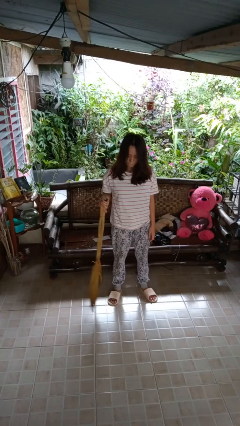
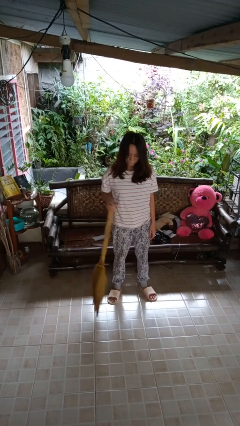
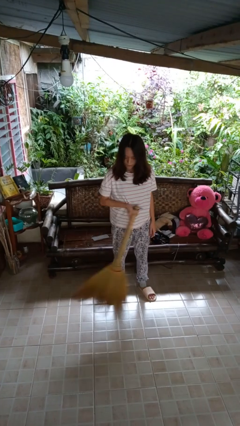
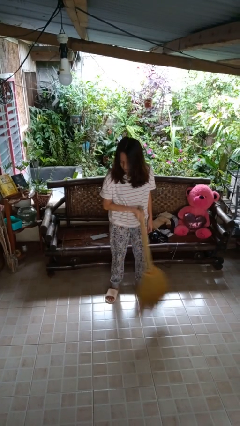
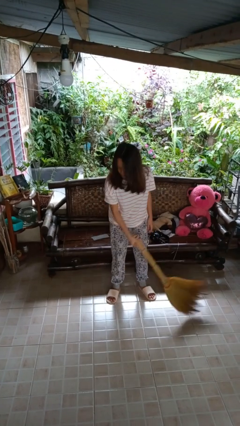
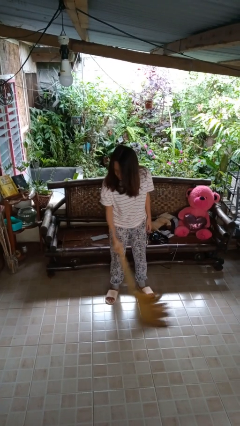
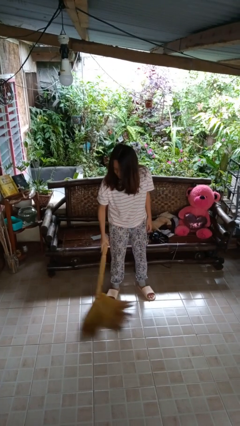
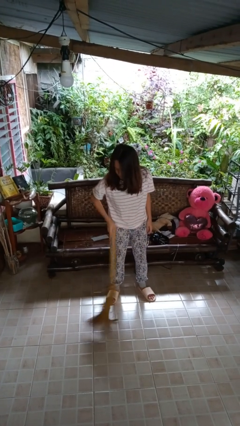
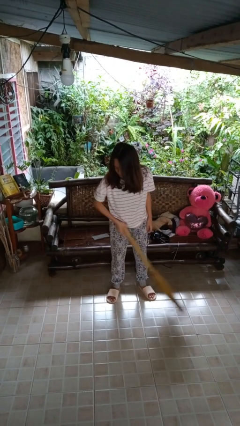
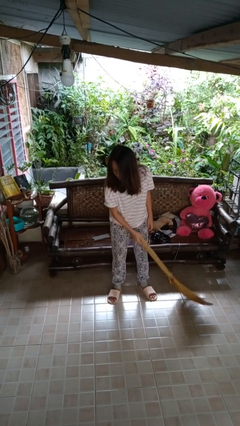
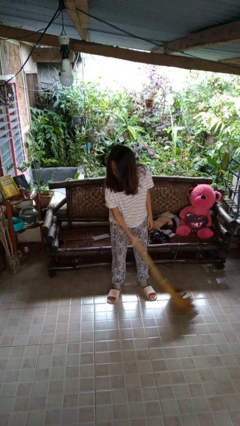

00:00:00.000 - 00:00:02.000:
person sweeps floor

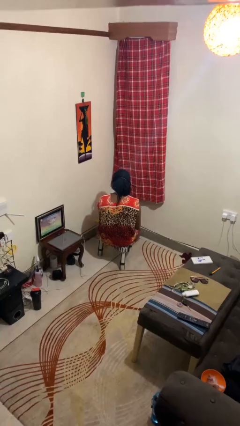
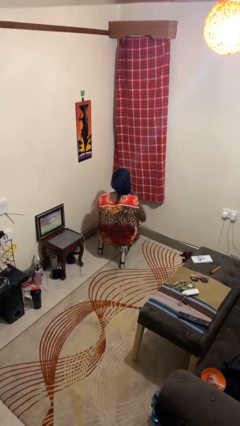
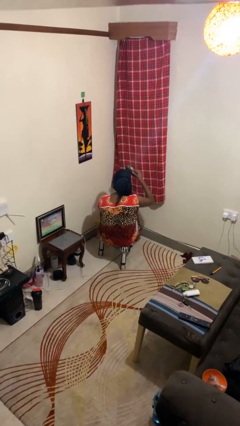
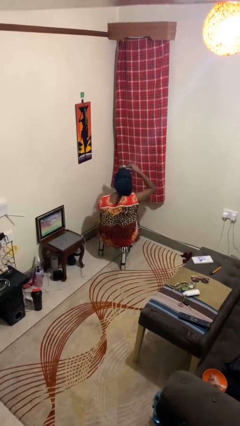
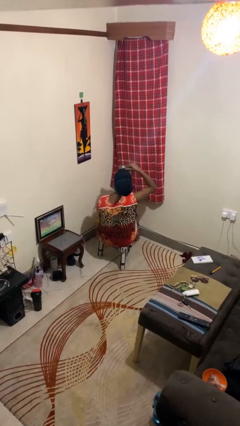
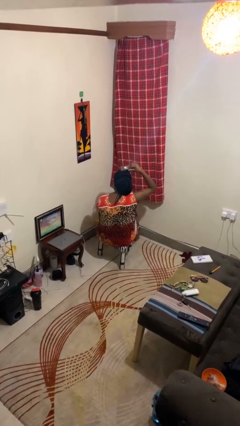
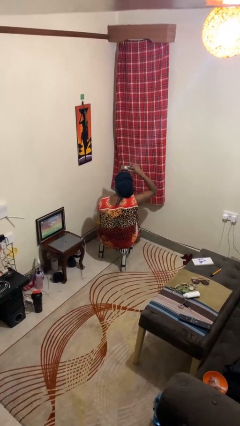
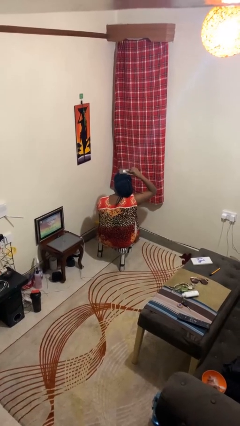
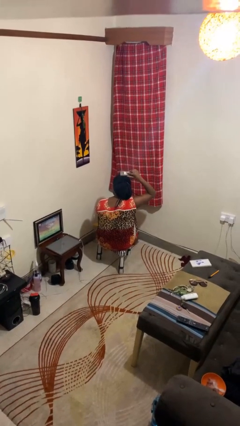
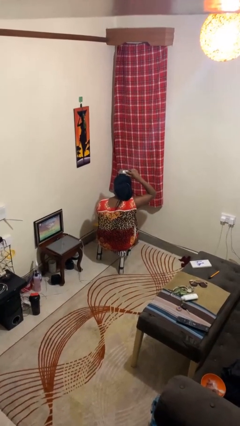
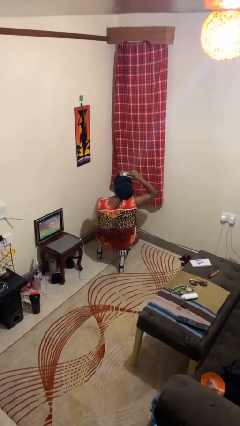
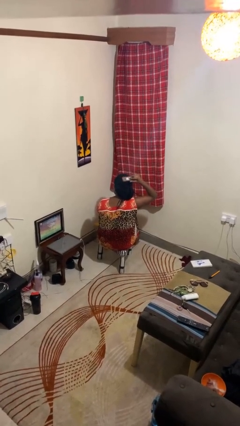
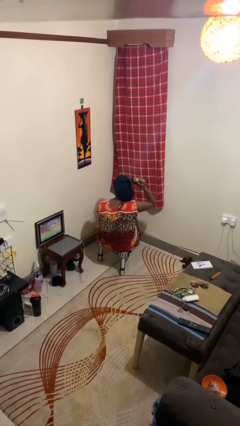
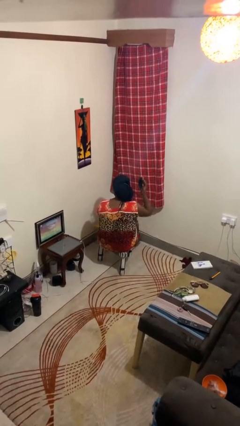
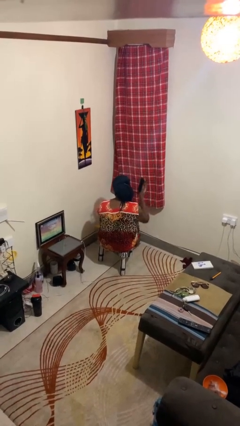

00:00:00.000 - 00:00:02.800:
person brushes hair

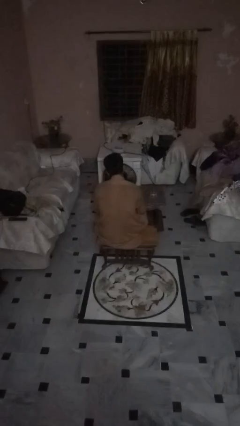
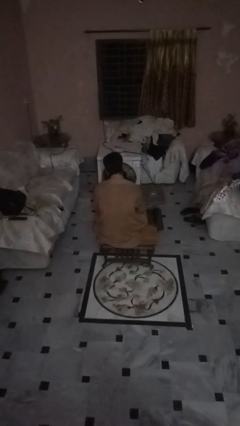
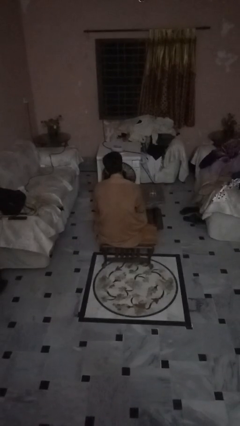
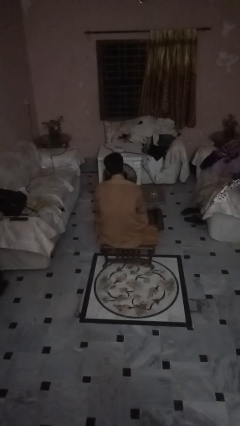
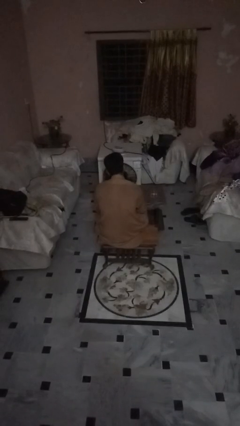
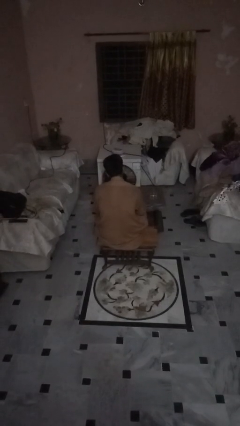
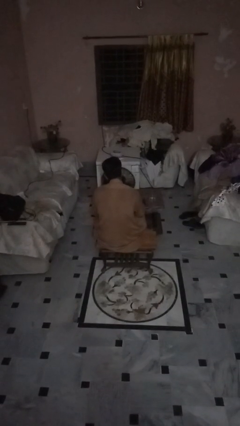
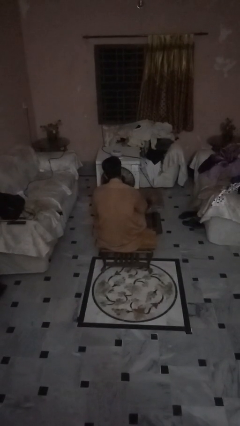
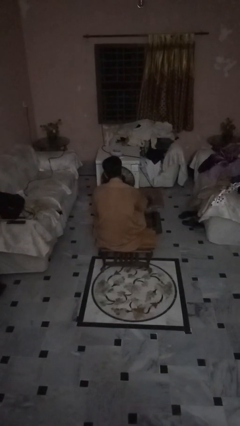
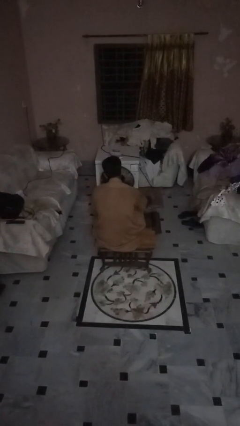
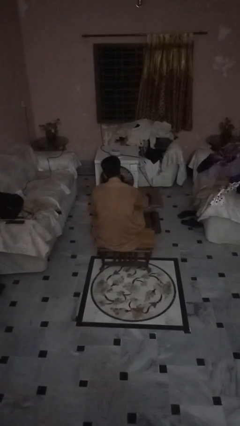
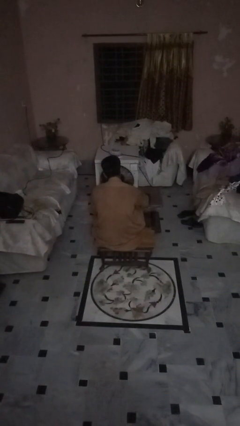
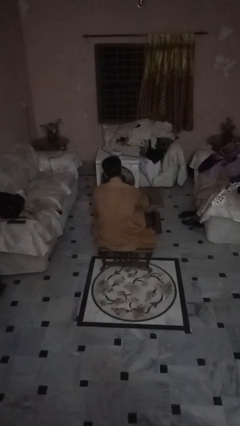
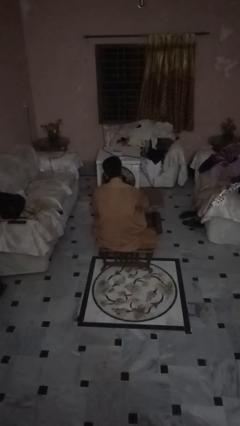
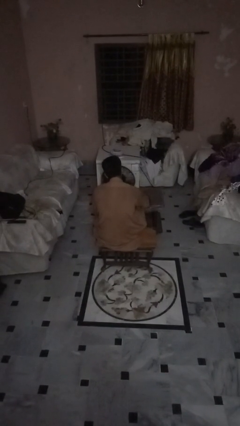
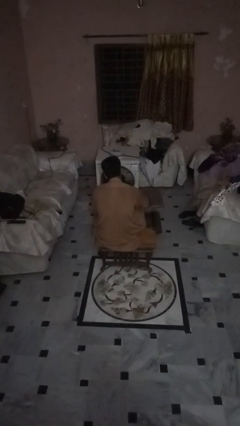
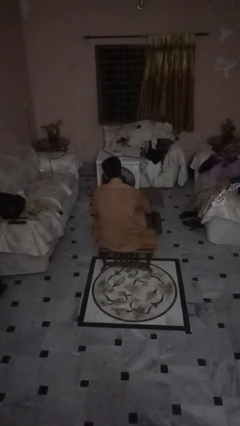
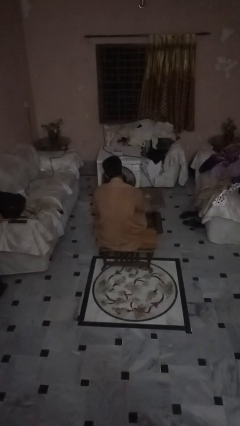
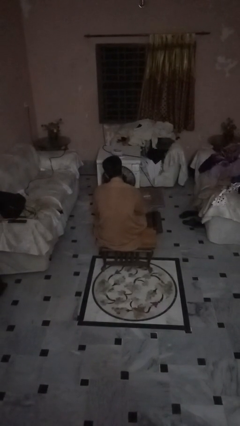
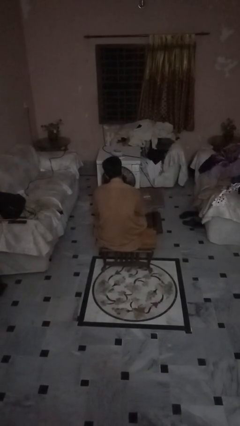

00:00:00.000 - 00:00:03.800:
person spills on table

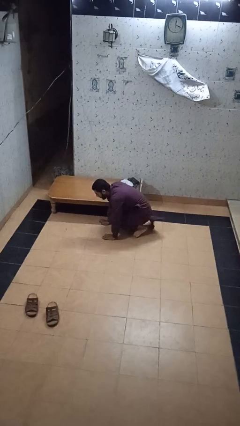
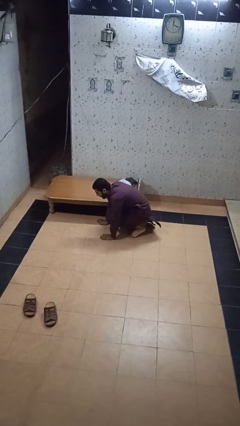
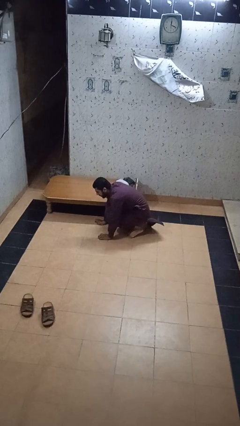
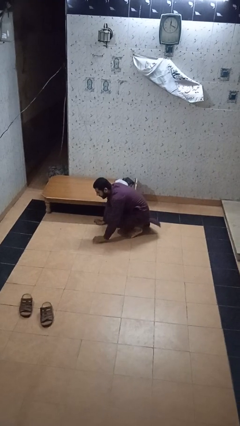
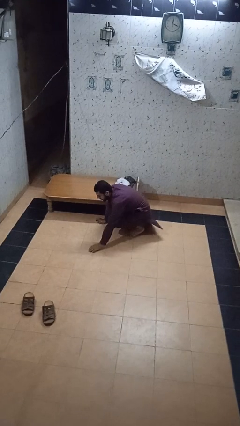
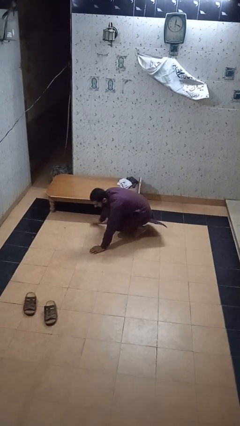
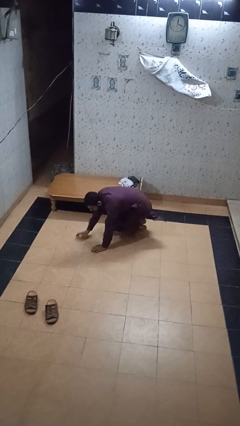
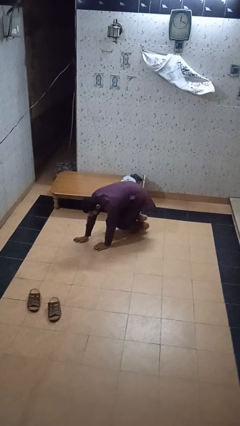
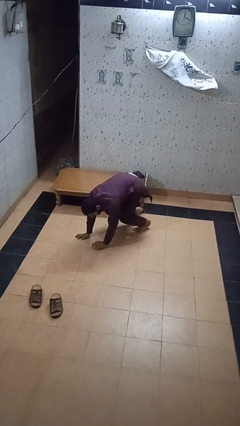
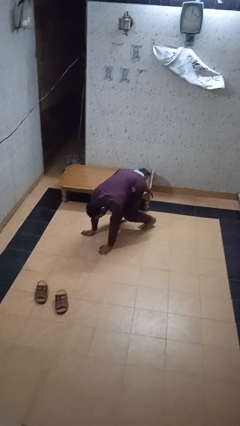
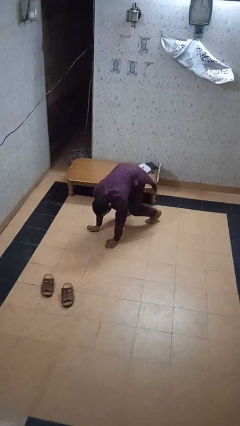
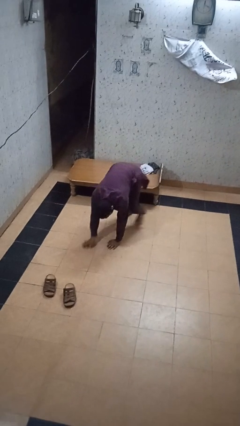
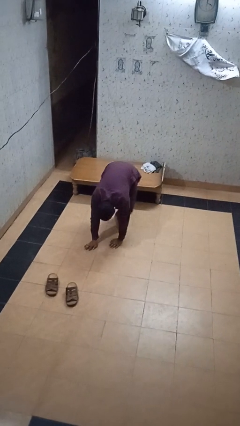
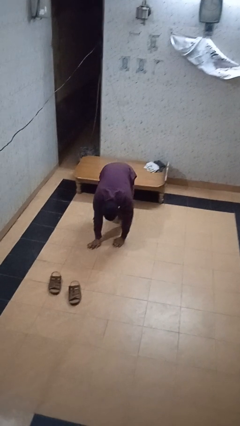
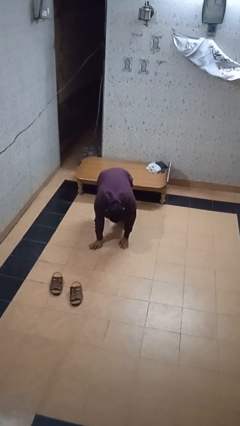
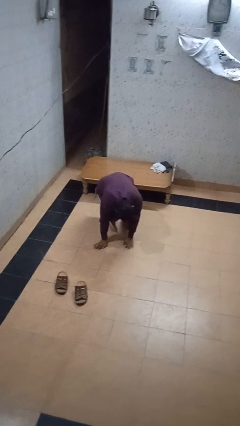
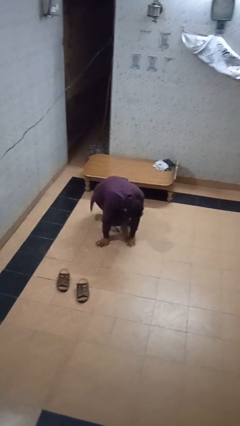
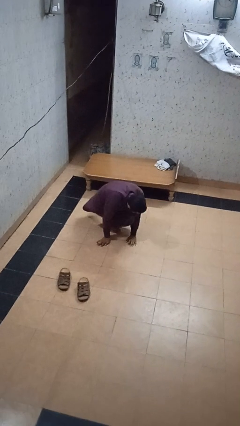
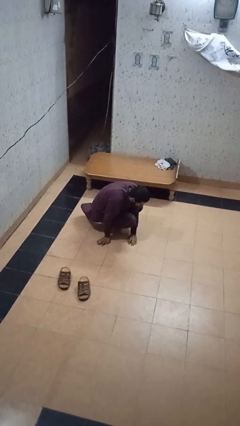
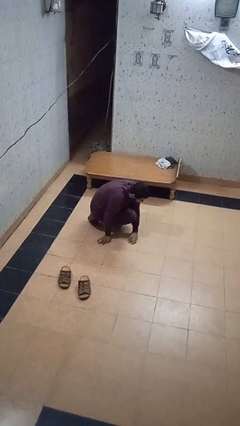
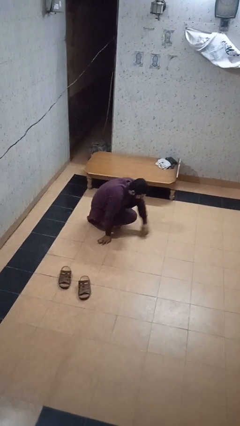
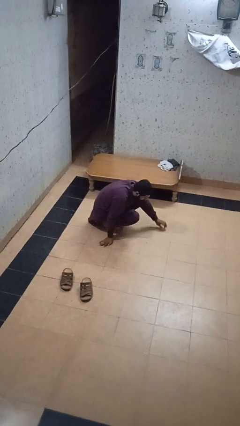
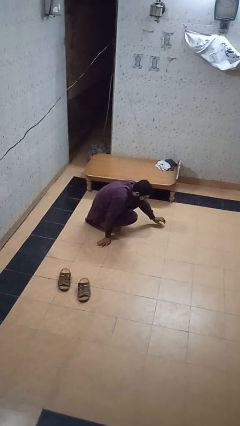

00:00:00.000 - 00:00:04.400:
person crawls

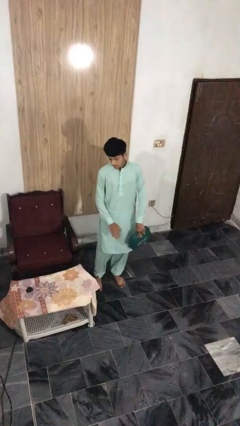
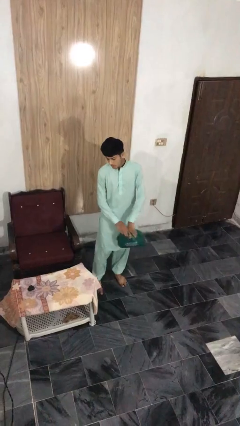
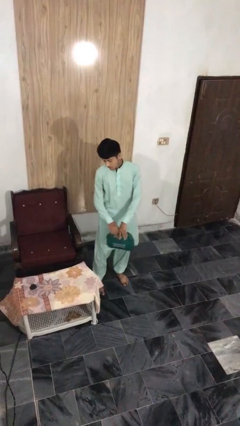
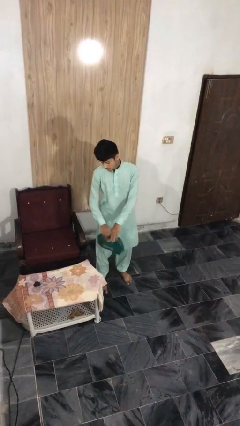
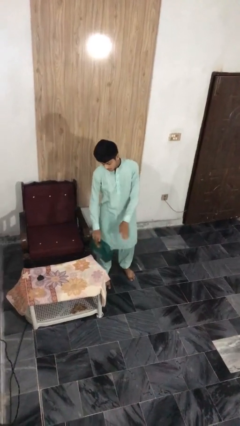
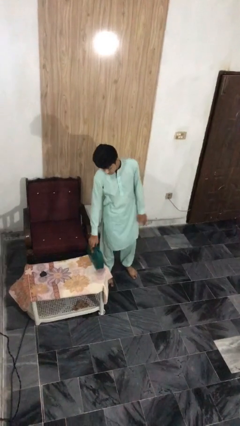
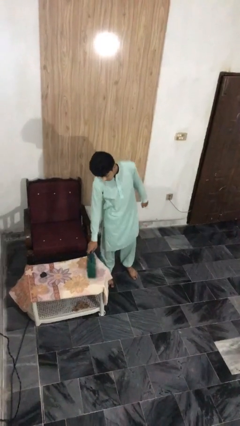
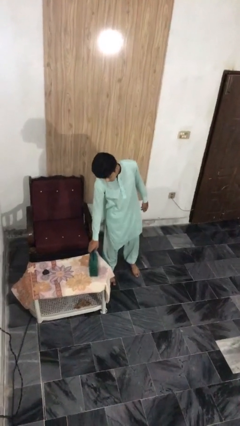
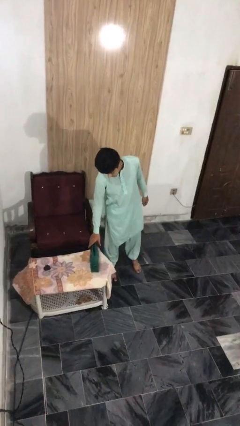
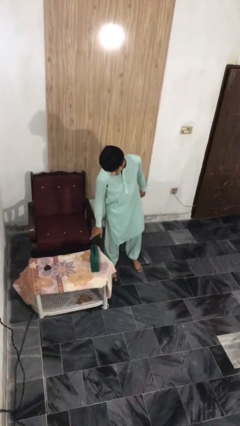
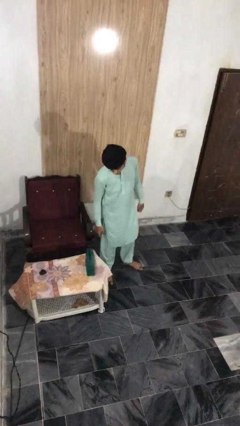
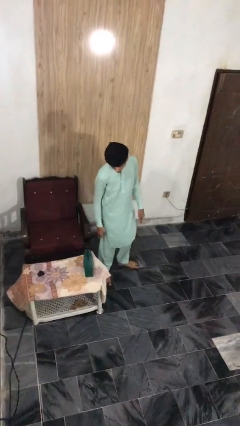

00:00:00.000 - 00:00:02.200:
person puts down object on table

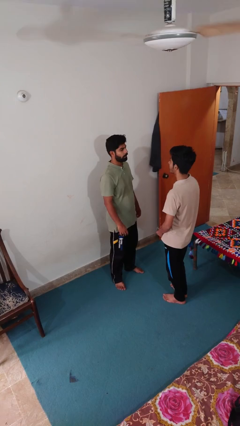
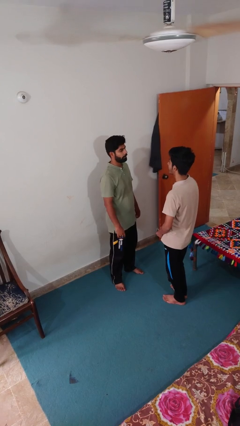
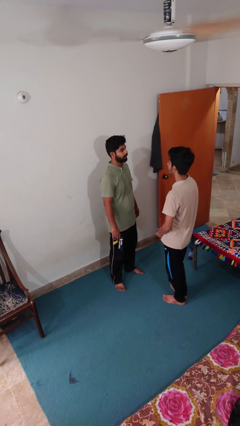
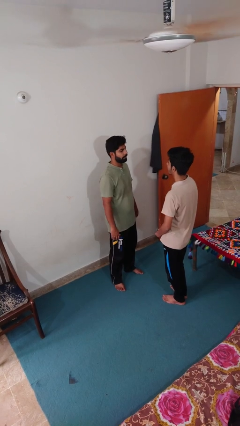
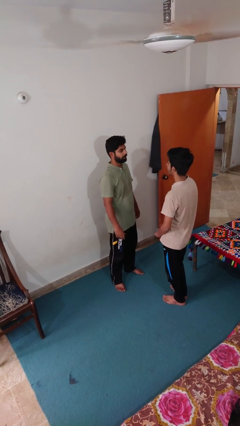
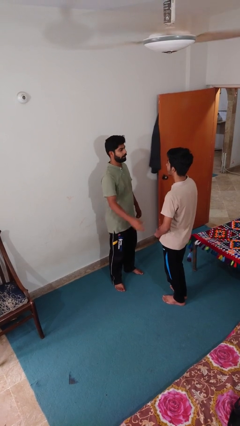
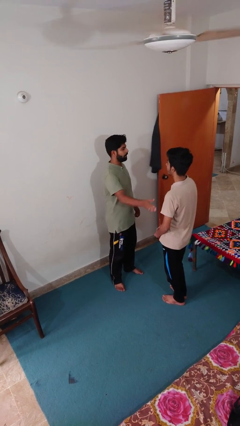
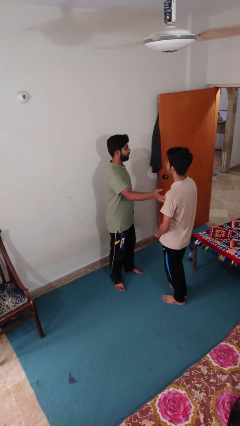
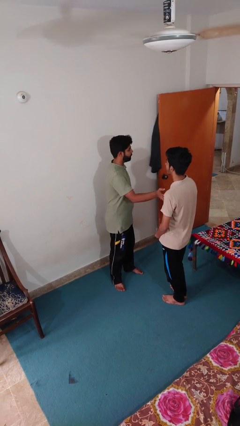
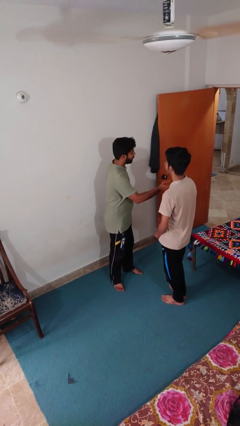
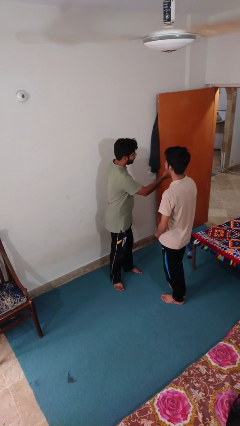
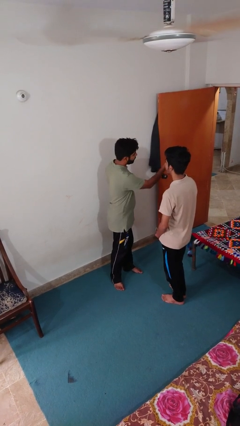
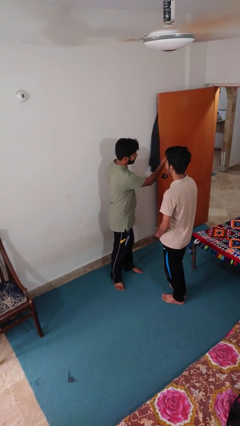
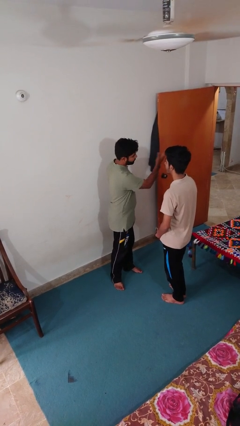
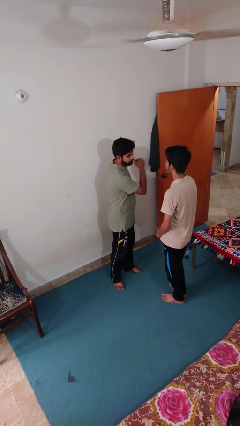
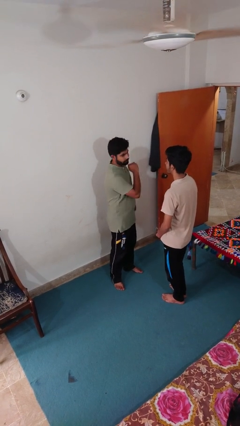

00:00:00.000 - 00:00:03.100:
person shoves person
